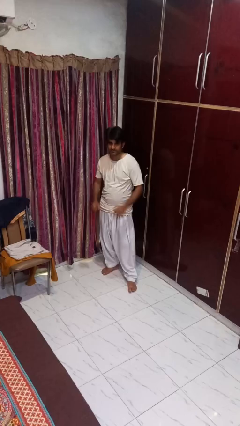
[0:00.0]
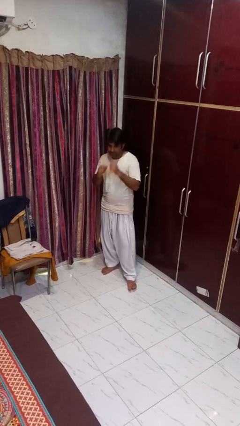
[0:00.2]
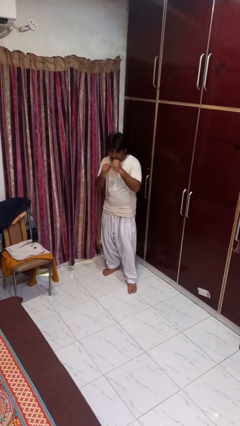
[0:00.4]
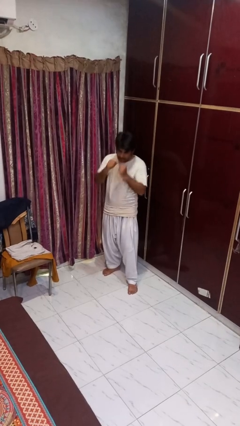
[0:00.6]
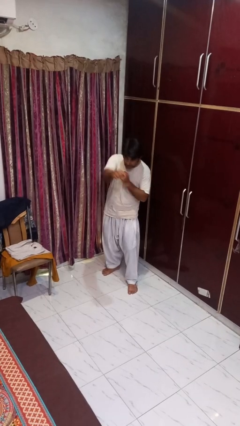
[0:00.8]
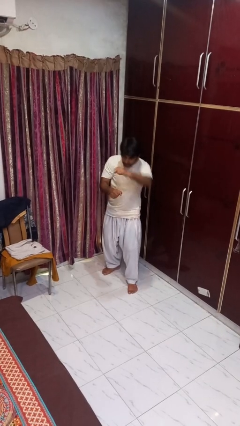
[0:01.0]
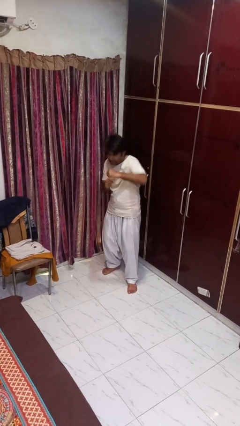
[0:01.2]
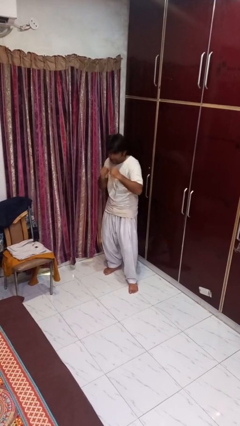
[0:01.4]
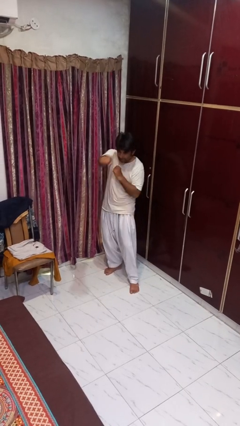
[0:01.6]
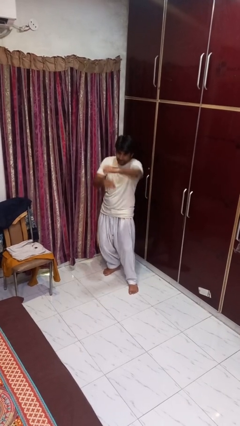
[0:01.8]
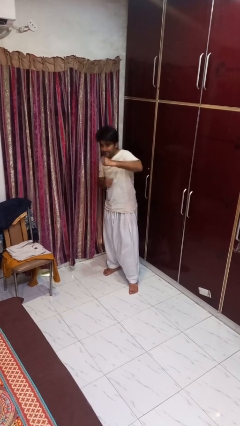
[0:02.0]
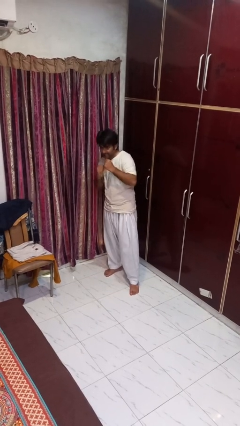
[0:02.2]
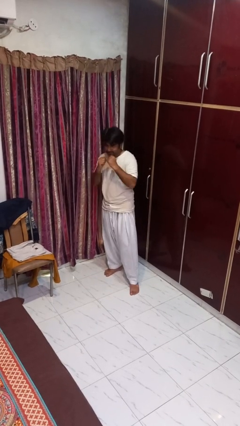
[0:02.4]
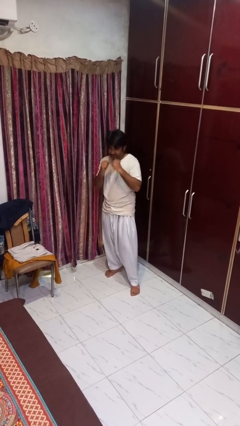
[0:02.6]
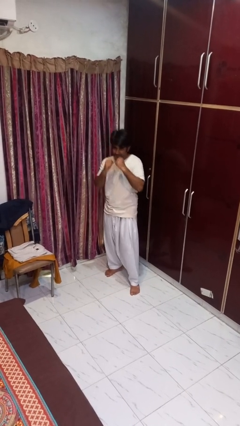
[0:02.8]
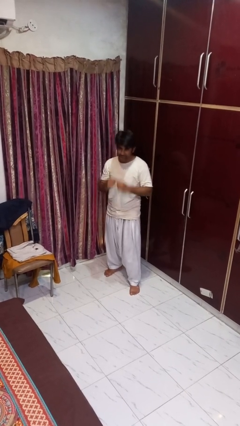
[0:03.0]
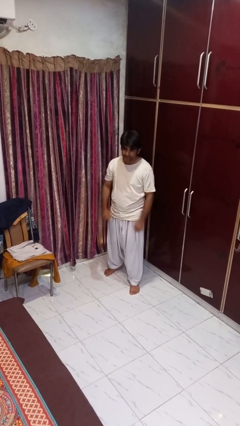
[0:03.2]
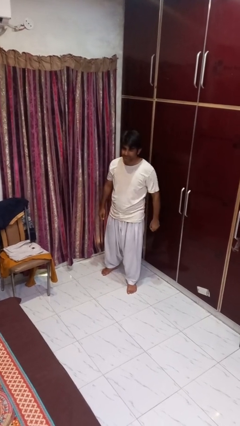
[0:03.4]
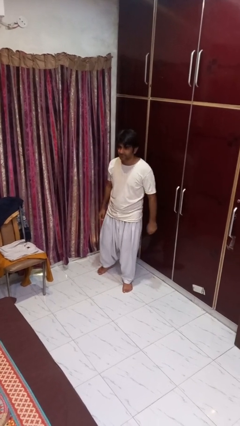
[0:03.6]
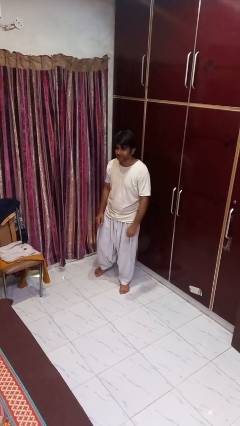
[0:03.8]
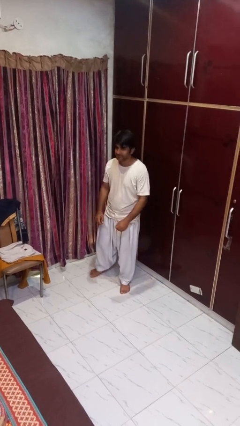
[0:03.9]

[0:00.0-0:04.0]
person punches

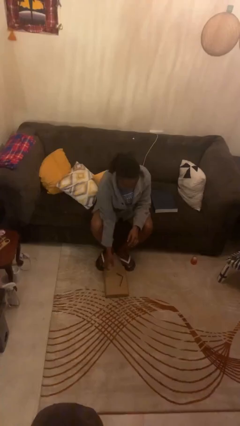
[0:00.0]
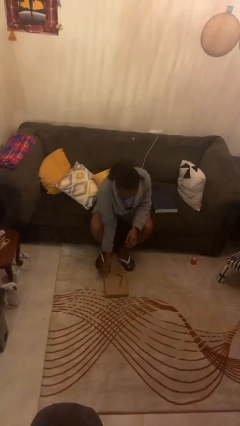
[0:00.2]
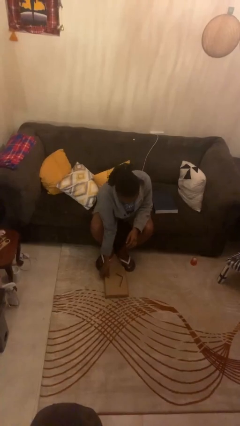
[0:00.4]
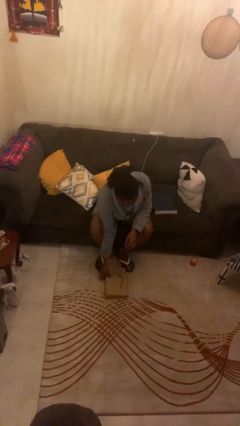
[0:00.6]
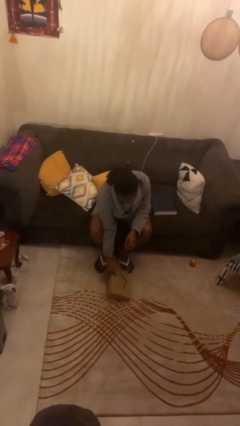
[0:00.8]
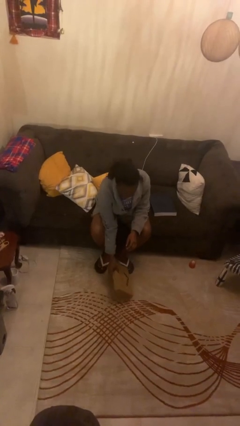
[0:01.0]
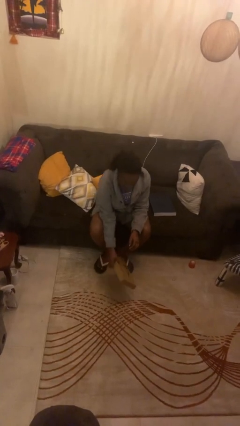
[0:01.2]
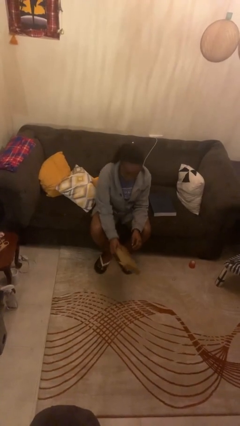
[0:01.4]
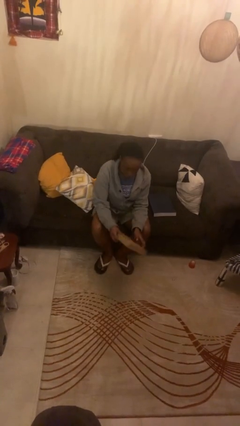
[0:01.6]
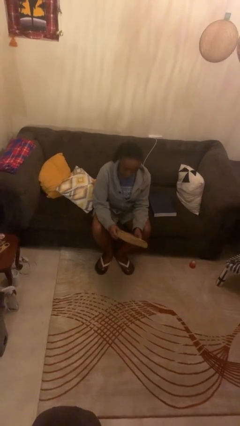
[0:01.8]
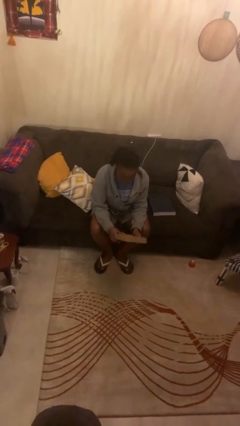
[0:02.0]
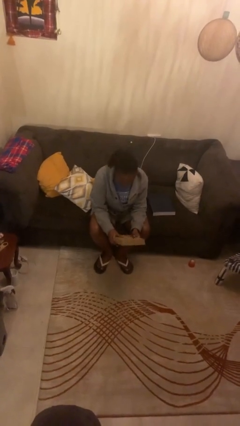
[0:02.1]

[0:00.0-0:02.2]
person picks up object from floor

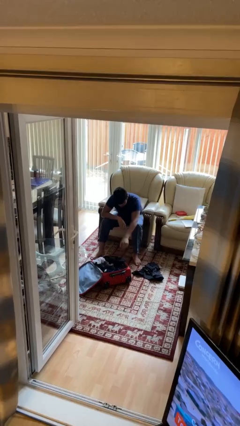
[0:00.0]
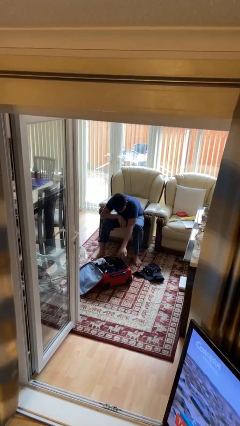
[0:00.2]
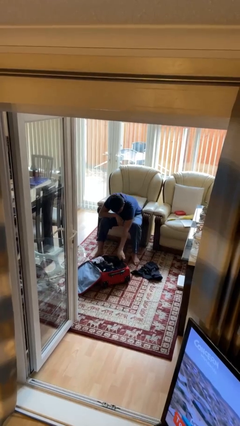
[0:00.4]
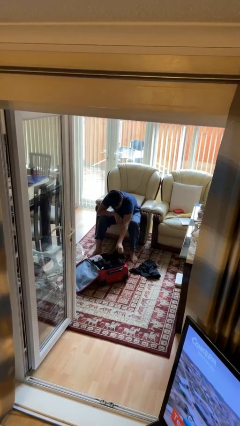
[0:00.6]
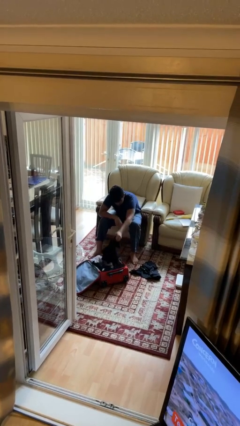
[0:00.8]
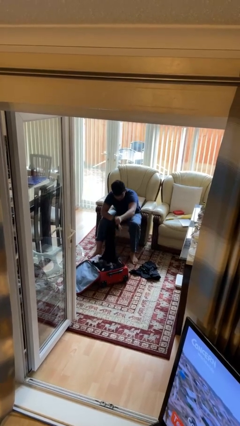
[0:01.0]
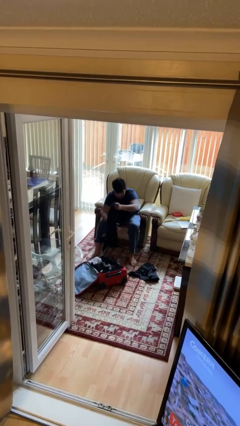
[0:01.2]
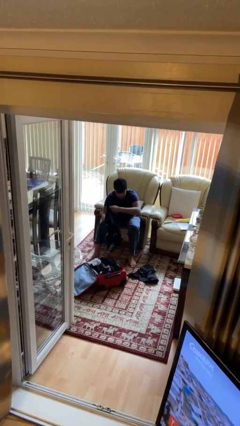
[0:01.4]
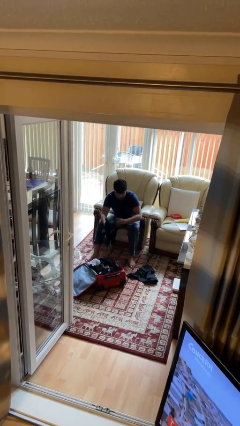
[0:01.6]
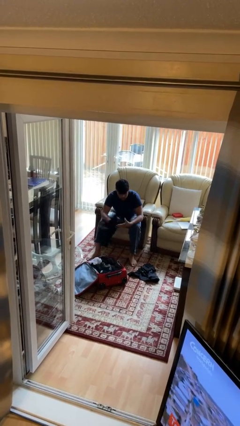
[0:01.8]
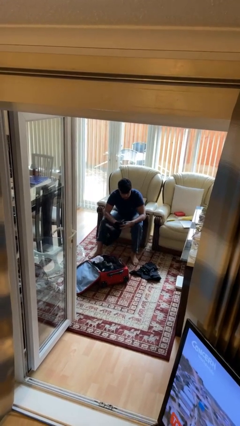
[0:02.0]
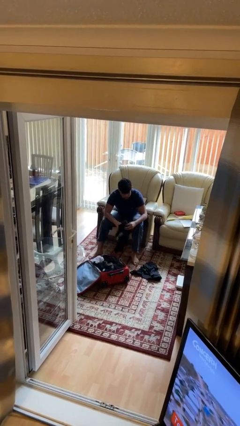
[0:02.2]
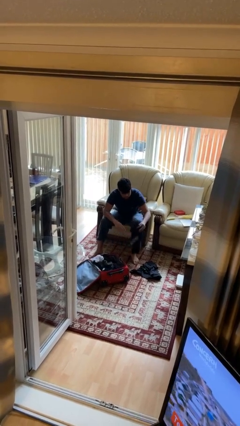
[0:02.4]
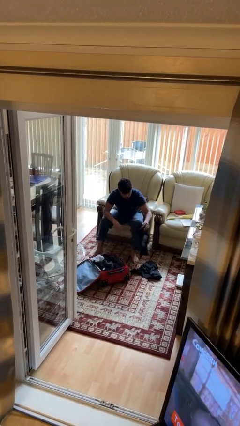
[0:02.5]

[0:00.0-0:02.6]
person unloads clothes from suitcase

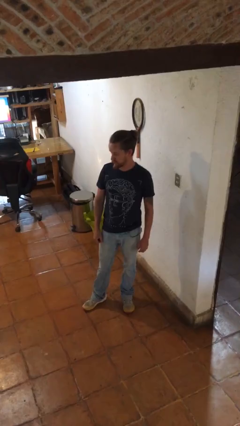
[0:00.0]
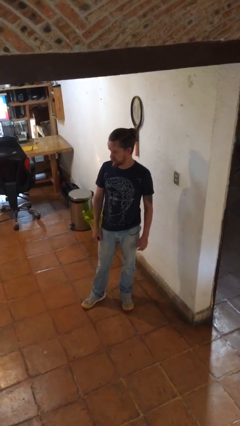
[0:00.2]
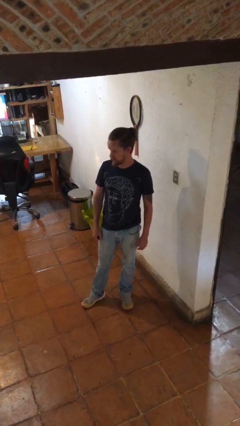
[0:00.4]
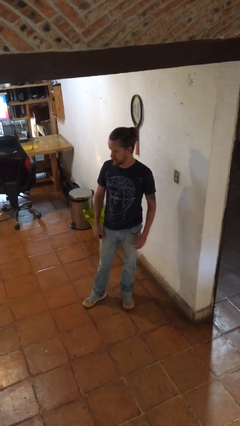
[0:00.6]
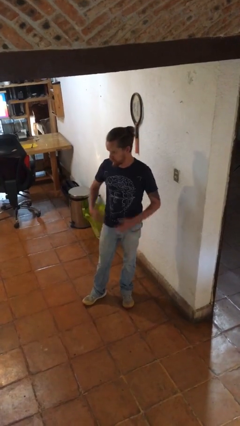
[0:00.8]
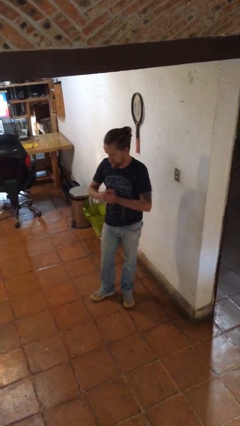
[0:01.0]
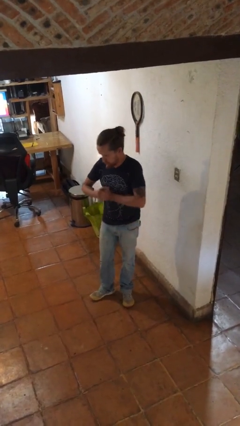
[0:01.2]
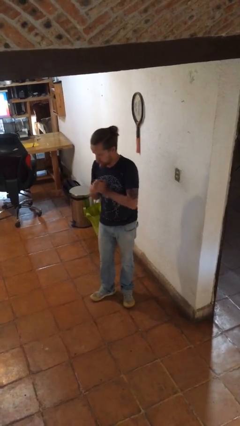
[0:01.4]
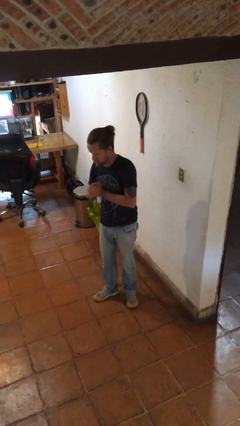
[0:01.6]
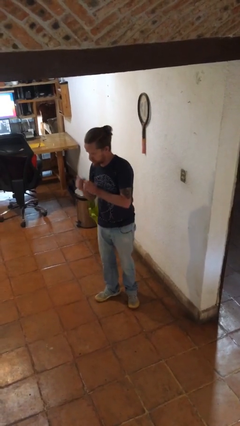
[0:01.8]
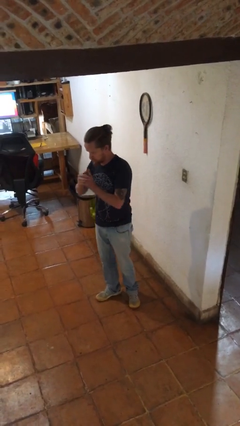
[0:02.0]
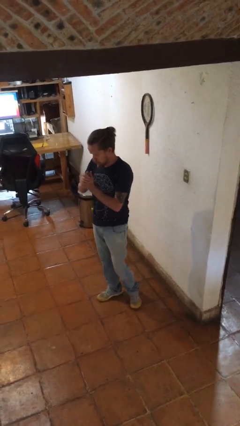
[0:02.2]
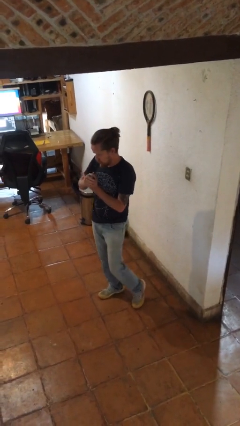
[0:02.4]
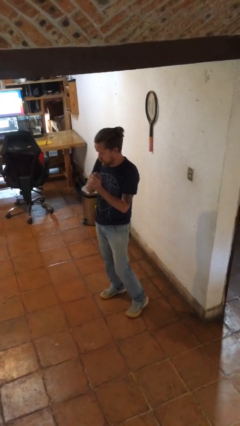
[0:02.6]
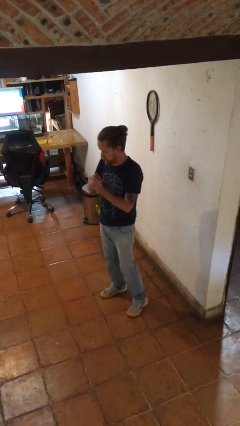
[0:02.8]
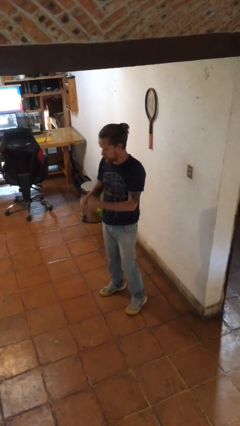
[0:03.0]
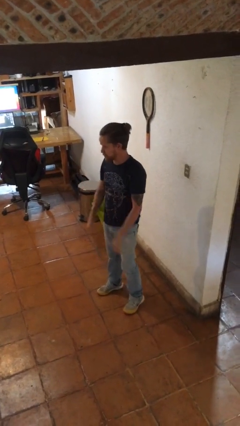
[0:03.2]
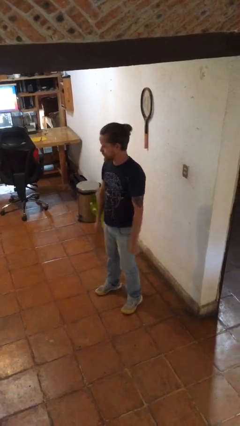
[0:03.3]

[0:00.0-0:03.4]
person cracks knuckles

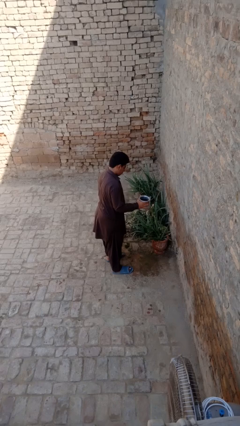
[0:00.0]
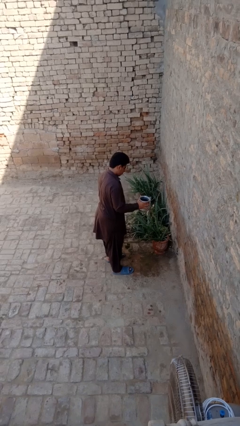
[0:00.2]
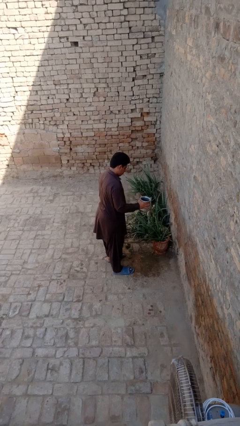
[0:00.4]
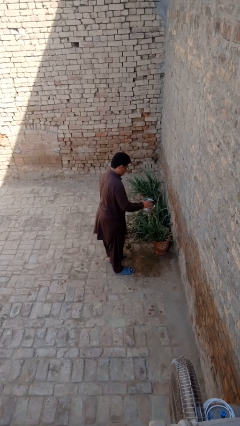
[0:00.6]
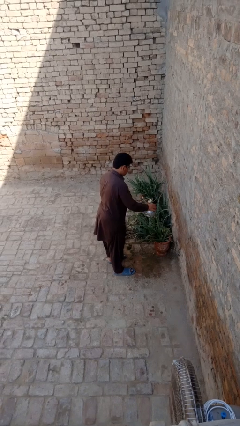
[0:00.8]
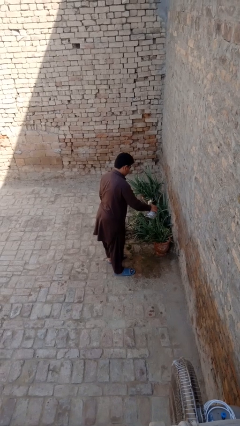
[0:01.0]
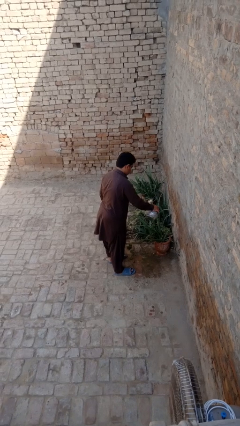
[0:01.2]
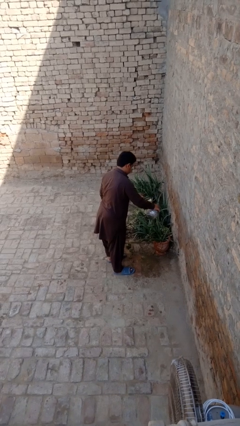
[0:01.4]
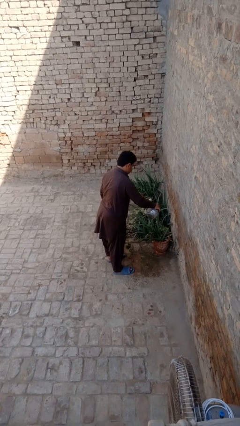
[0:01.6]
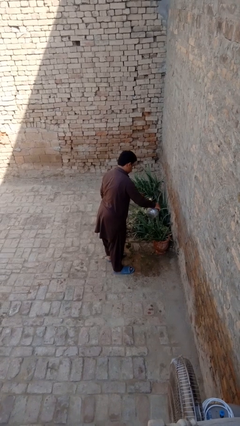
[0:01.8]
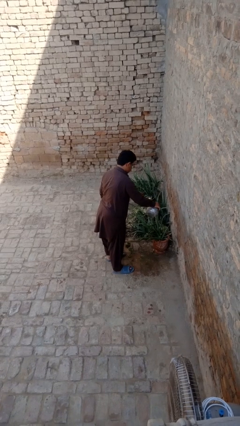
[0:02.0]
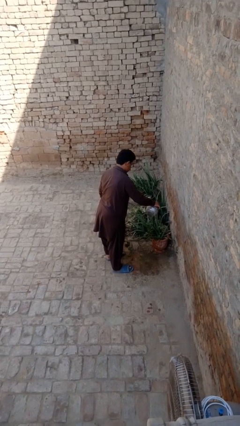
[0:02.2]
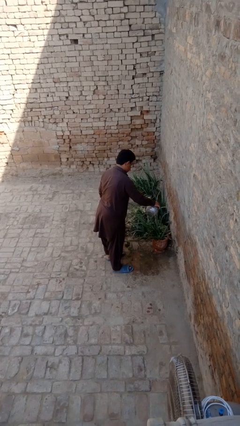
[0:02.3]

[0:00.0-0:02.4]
person waters houseplant

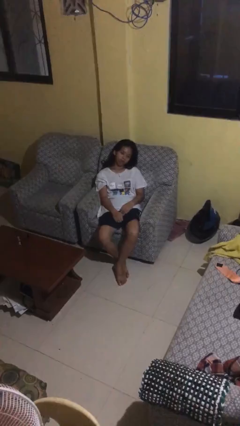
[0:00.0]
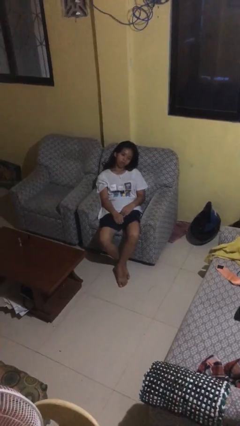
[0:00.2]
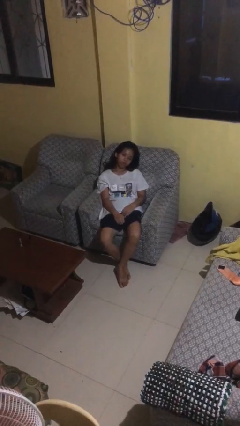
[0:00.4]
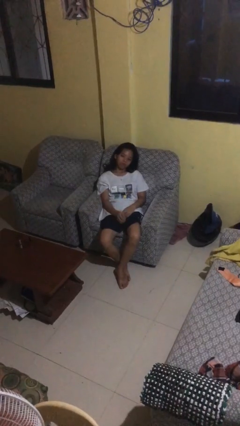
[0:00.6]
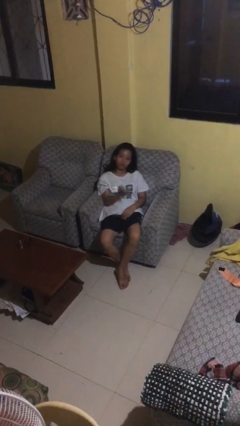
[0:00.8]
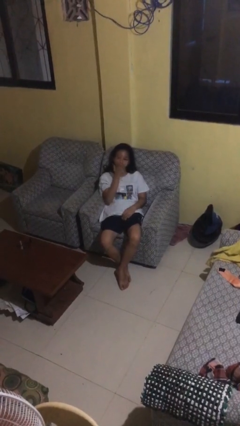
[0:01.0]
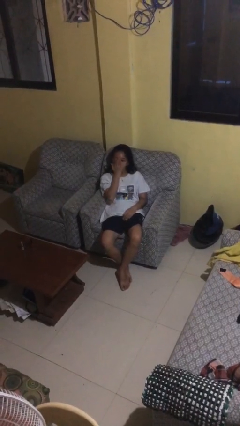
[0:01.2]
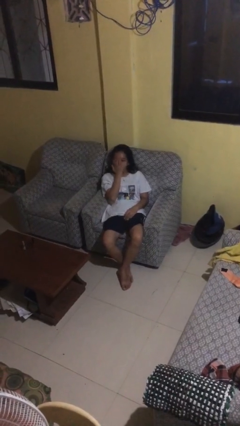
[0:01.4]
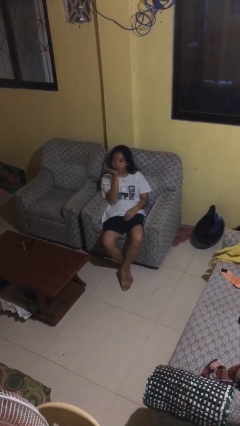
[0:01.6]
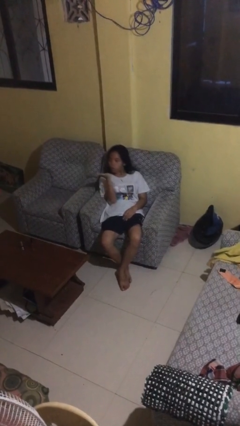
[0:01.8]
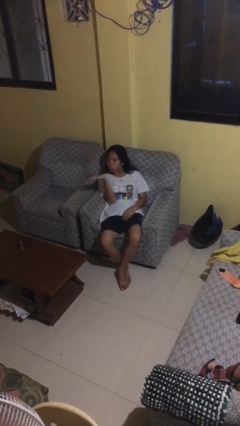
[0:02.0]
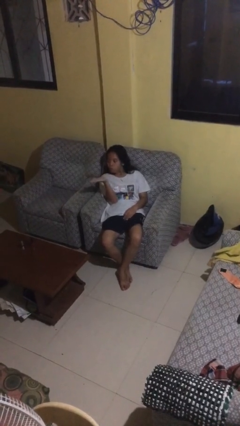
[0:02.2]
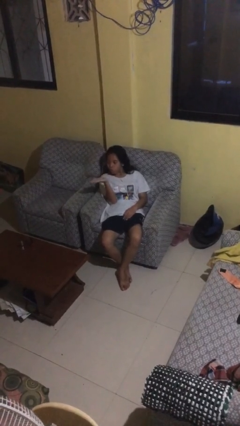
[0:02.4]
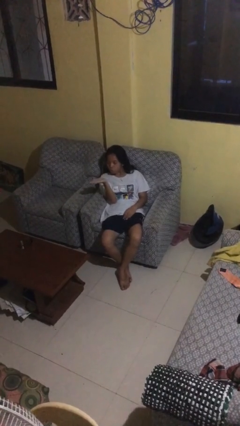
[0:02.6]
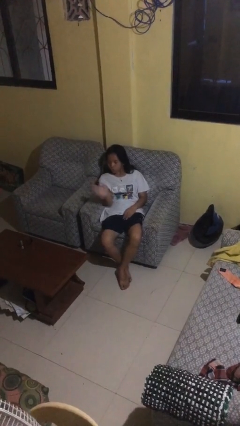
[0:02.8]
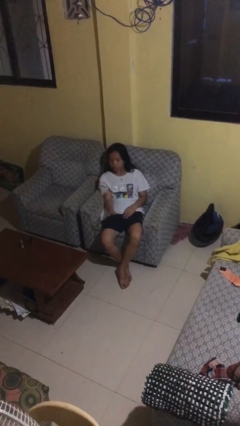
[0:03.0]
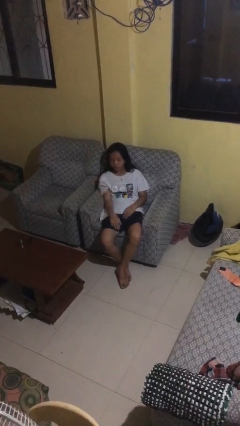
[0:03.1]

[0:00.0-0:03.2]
person gestures blow kiss
